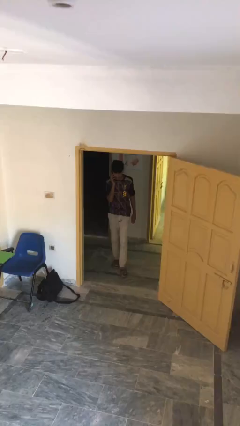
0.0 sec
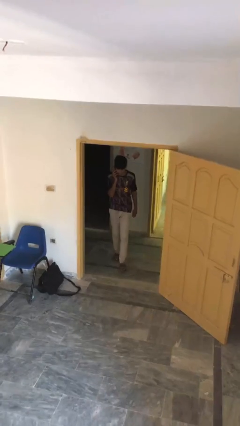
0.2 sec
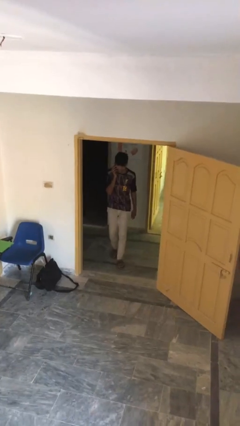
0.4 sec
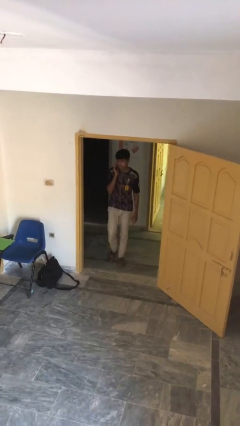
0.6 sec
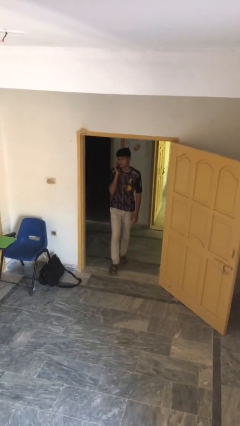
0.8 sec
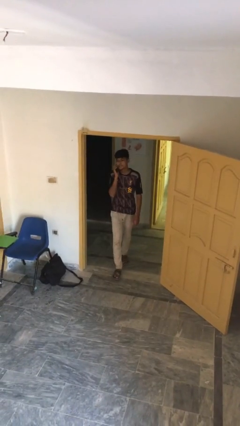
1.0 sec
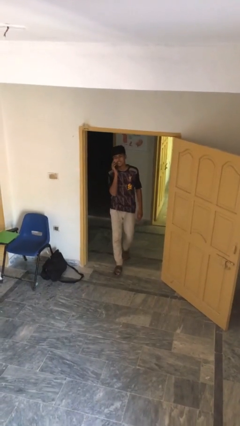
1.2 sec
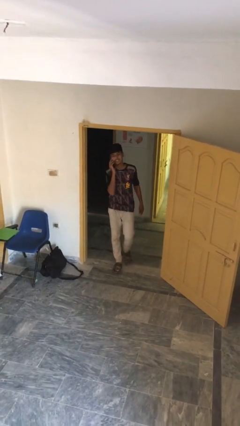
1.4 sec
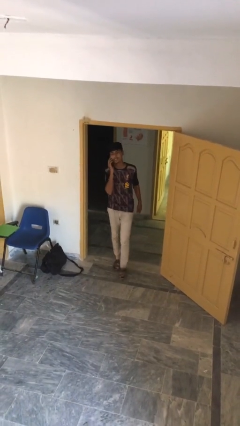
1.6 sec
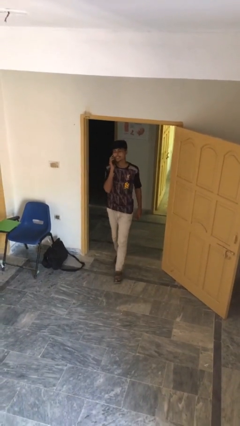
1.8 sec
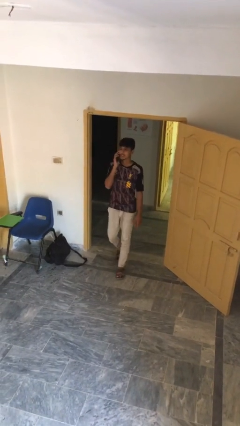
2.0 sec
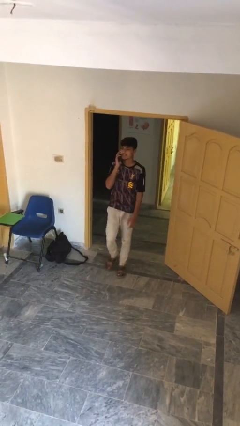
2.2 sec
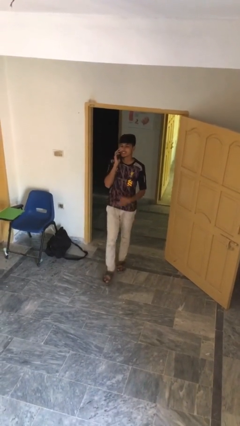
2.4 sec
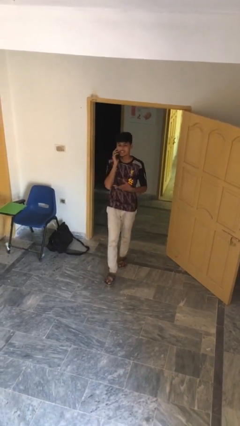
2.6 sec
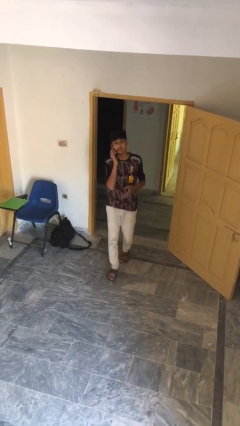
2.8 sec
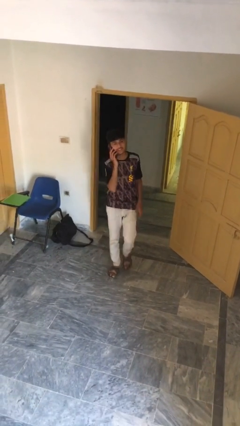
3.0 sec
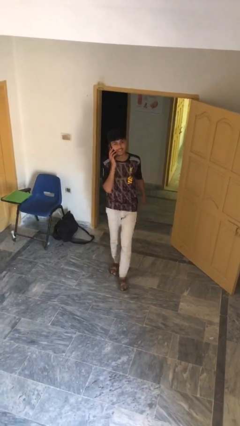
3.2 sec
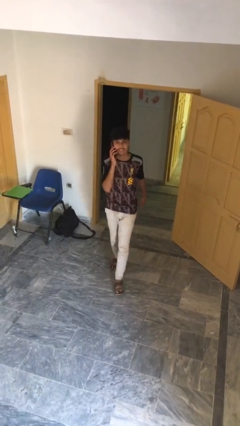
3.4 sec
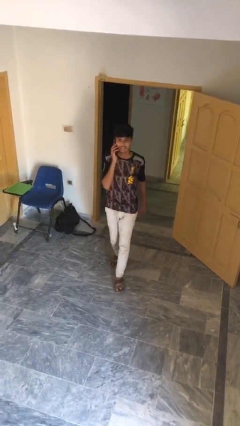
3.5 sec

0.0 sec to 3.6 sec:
person enters scene through structure

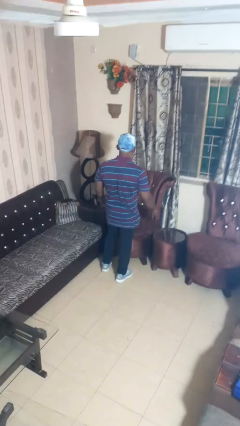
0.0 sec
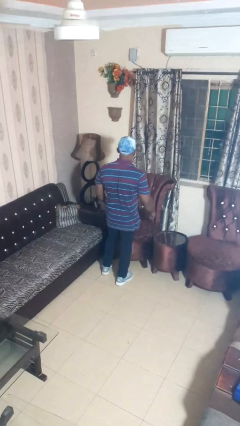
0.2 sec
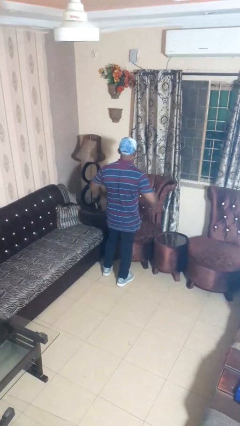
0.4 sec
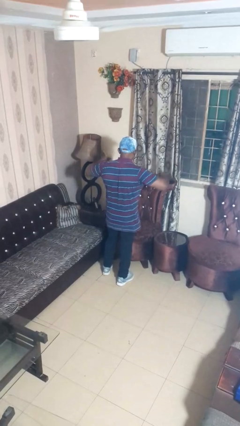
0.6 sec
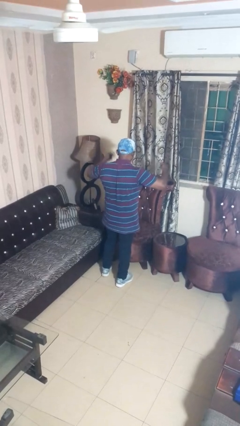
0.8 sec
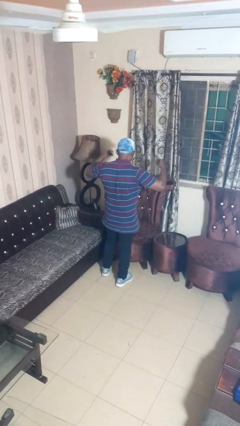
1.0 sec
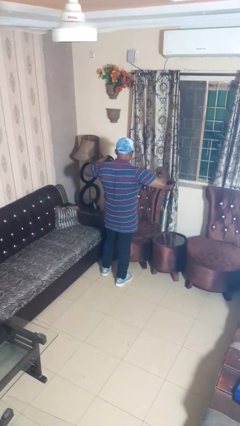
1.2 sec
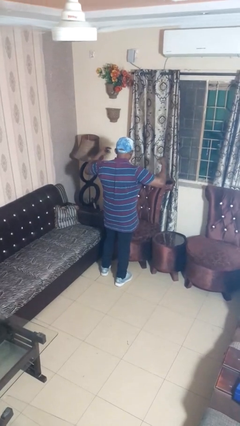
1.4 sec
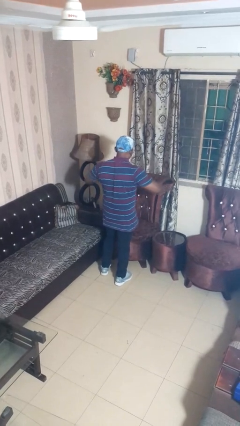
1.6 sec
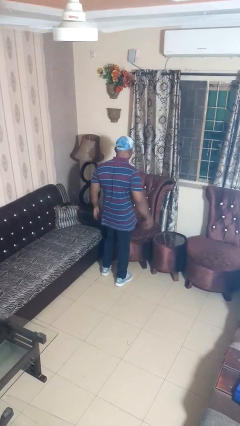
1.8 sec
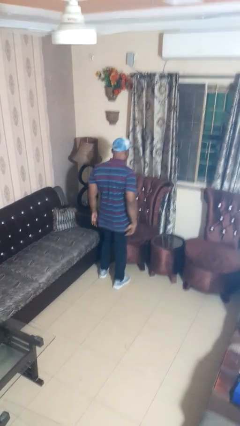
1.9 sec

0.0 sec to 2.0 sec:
person snaps fingers

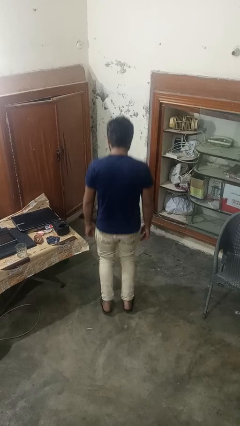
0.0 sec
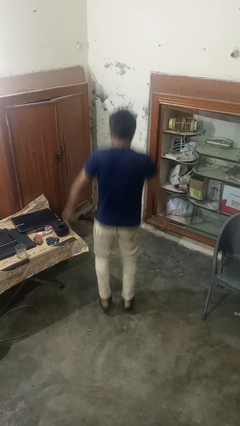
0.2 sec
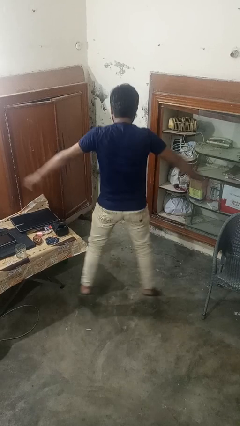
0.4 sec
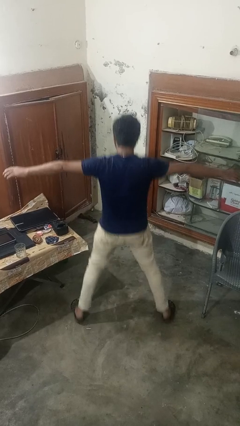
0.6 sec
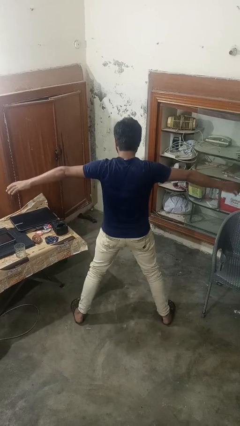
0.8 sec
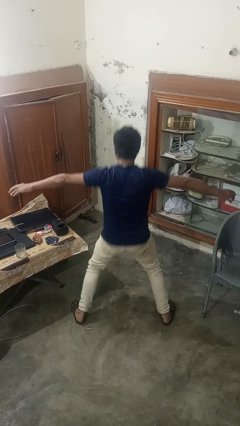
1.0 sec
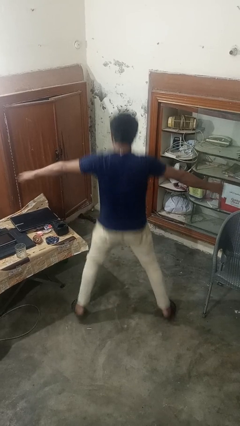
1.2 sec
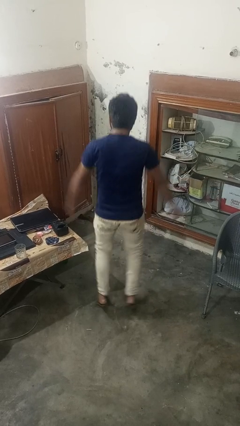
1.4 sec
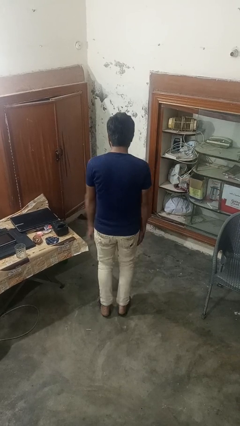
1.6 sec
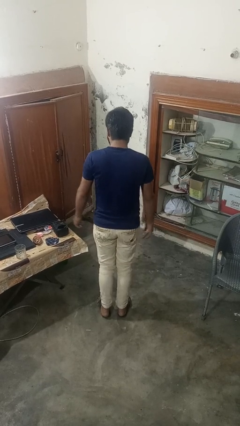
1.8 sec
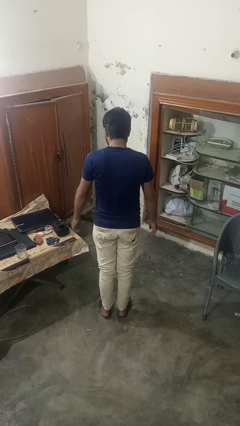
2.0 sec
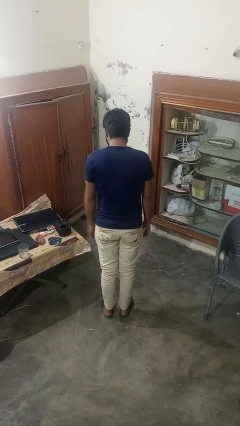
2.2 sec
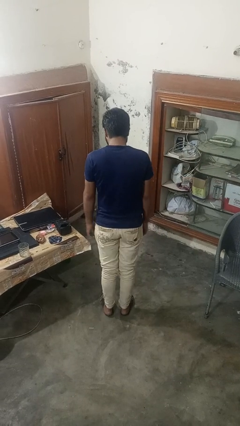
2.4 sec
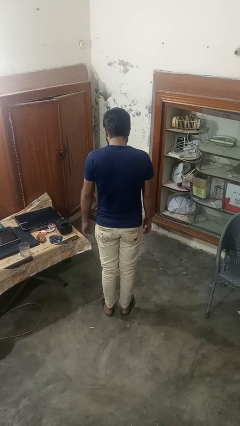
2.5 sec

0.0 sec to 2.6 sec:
person exercises with jumping jacks

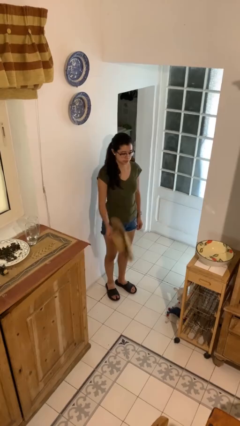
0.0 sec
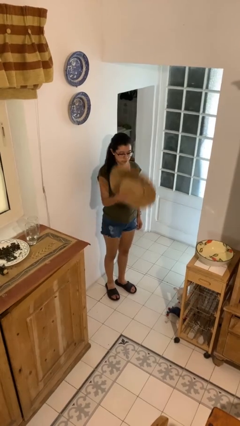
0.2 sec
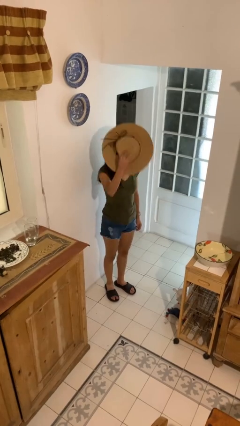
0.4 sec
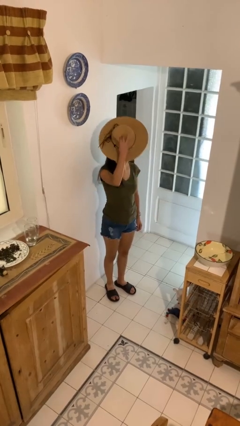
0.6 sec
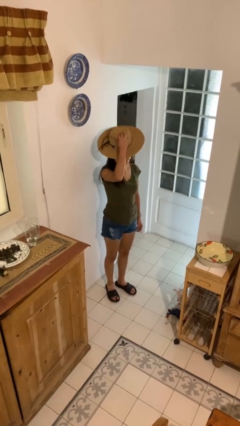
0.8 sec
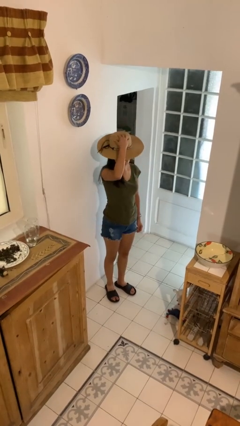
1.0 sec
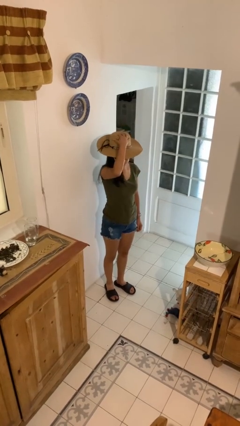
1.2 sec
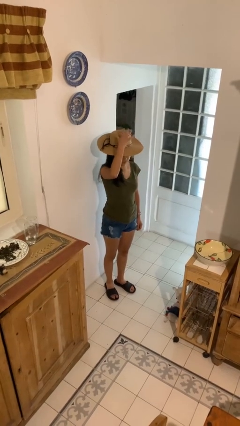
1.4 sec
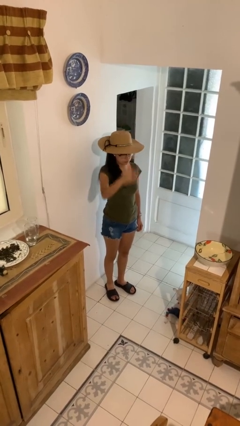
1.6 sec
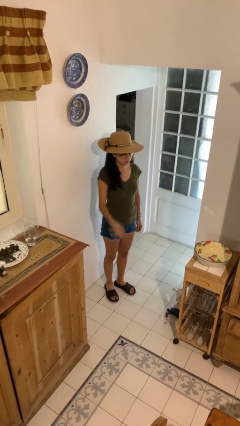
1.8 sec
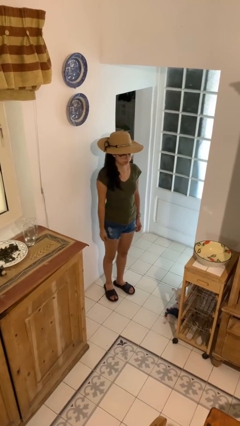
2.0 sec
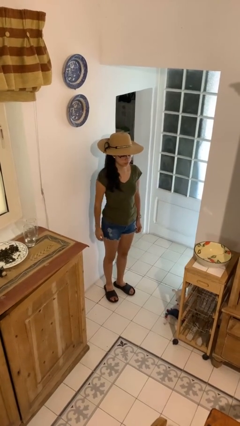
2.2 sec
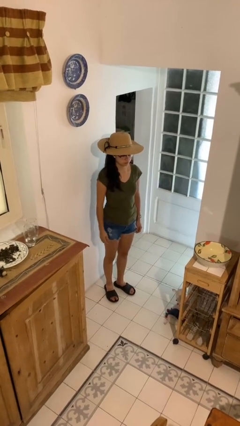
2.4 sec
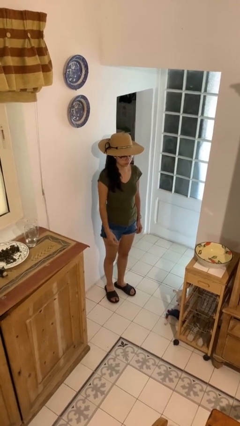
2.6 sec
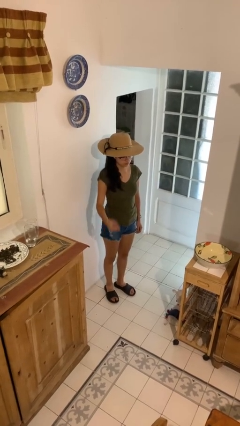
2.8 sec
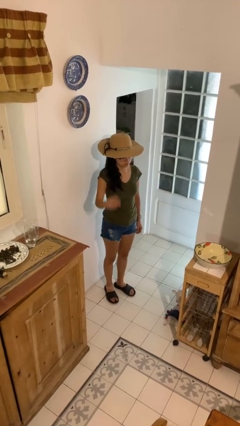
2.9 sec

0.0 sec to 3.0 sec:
person puts on hat

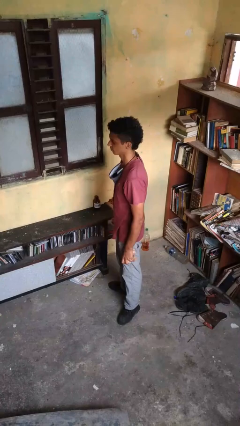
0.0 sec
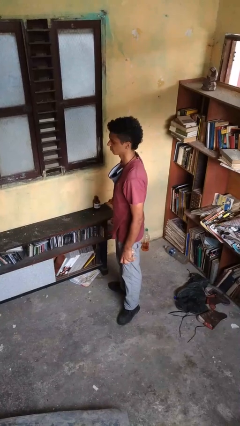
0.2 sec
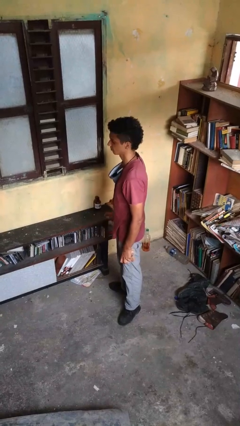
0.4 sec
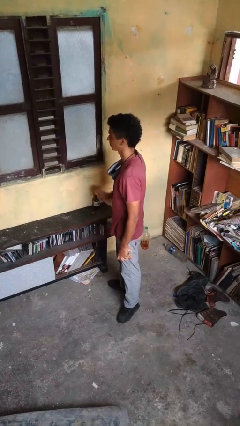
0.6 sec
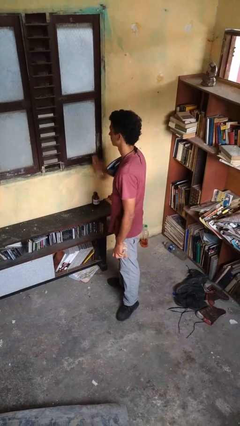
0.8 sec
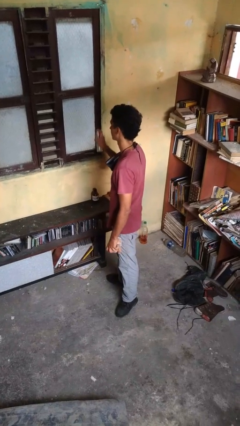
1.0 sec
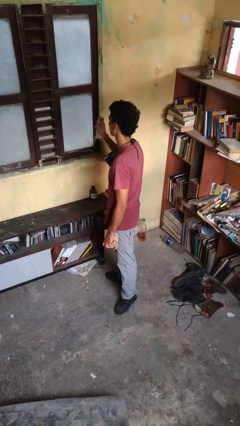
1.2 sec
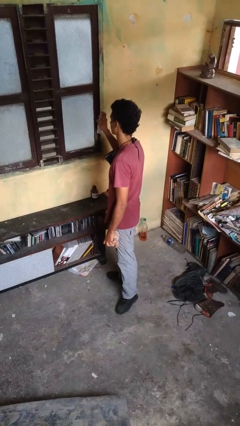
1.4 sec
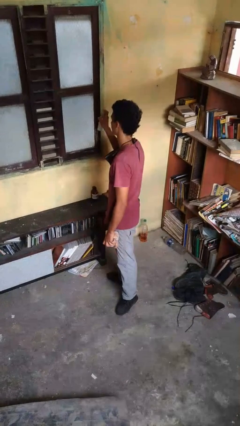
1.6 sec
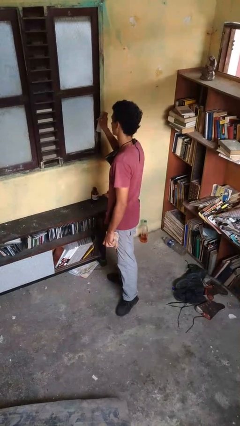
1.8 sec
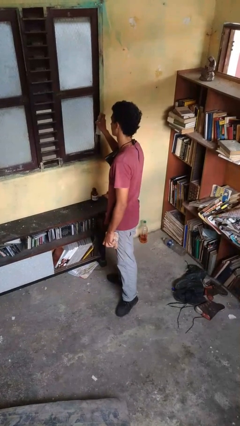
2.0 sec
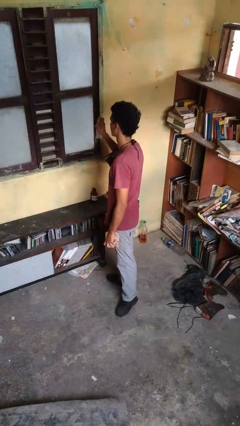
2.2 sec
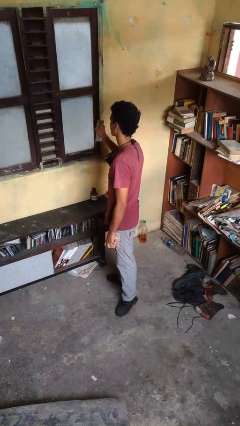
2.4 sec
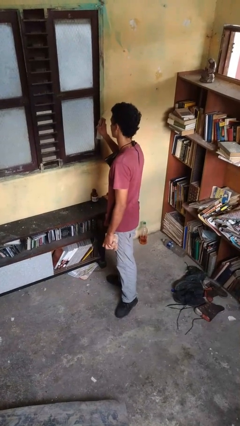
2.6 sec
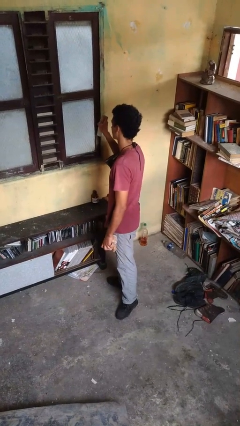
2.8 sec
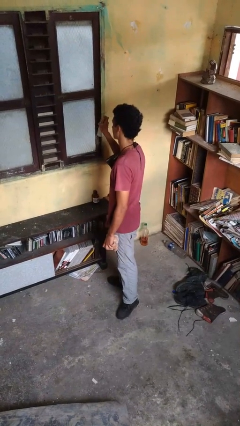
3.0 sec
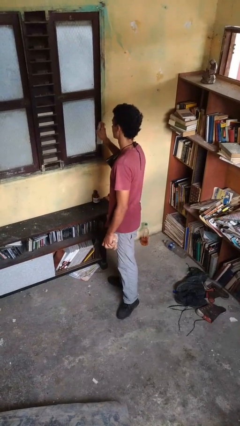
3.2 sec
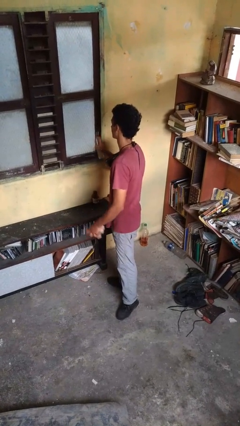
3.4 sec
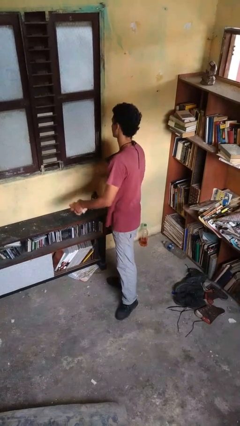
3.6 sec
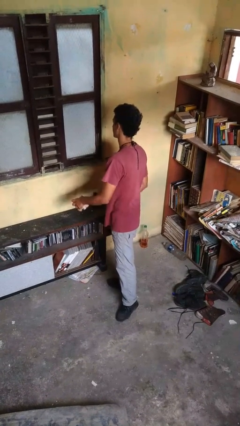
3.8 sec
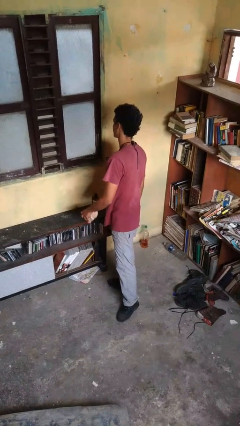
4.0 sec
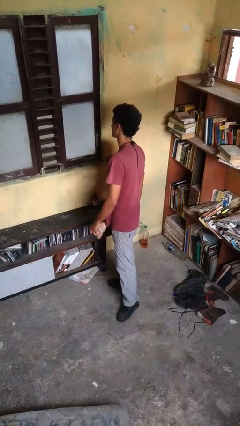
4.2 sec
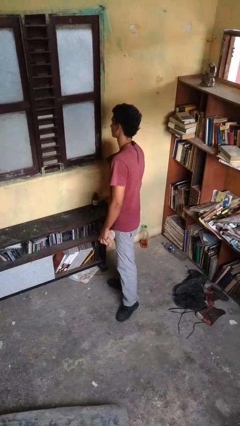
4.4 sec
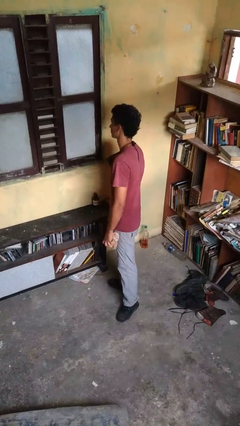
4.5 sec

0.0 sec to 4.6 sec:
person sprays from bottle

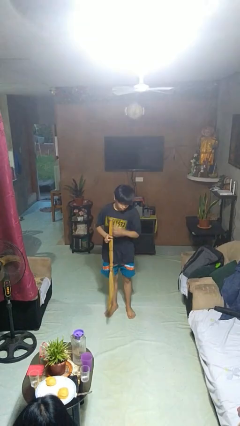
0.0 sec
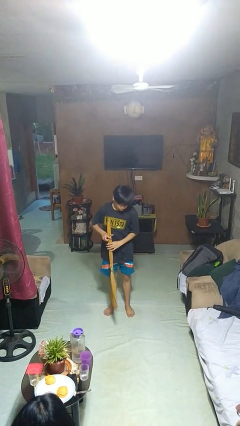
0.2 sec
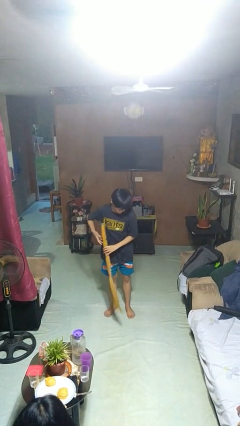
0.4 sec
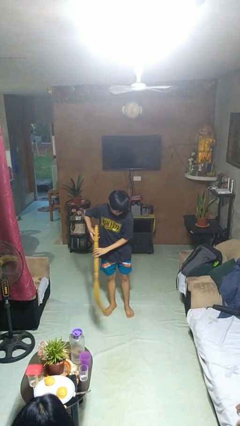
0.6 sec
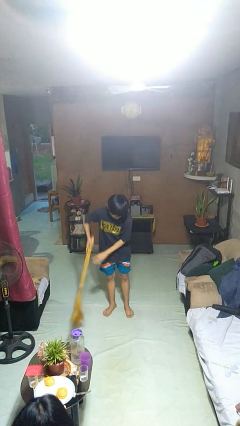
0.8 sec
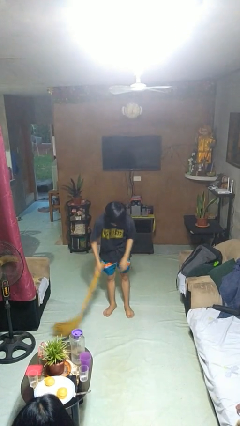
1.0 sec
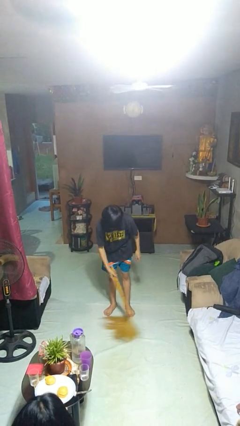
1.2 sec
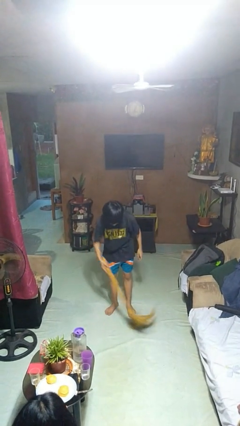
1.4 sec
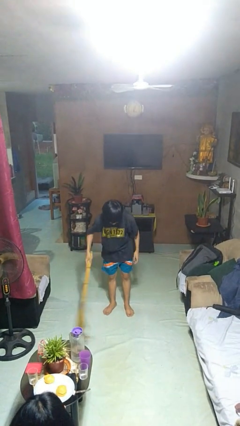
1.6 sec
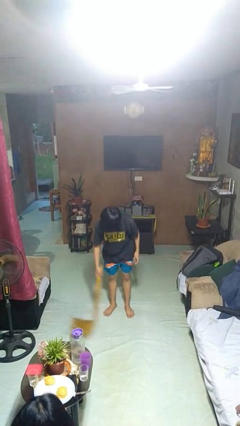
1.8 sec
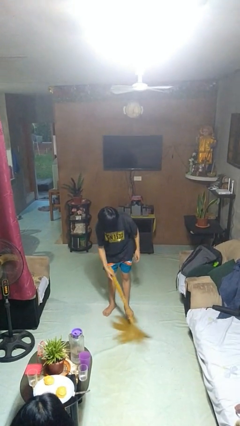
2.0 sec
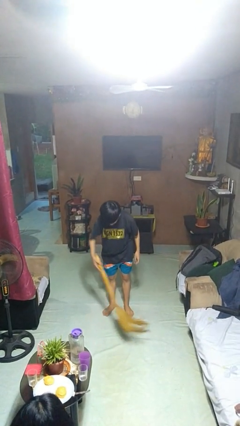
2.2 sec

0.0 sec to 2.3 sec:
person sweeps floor
